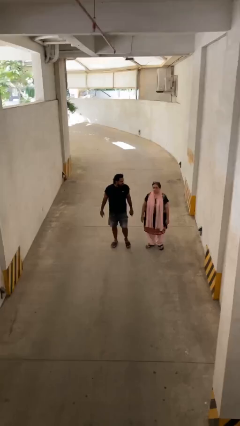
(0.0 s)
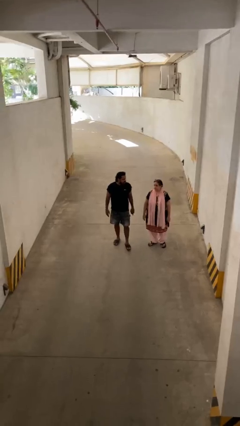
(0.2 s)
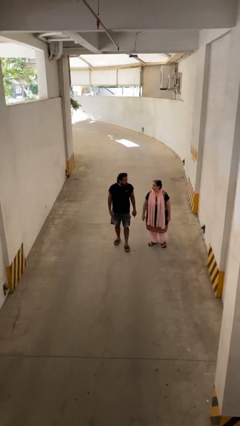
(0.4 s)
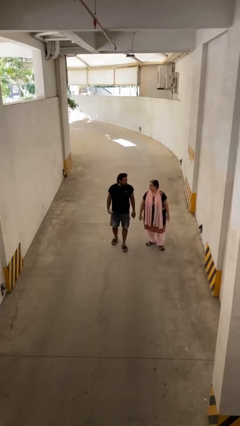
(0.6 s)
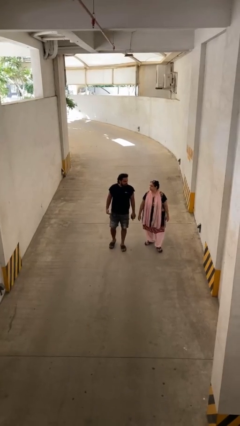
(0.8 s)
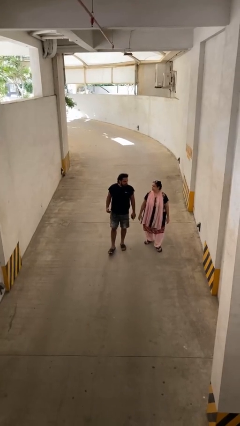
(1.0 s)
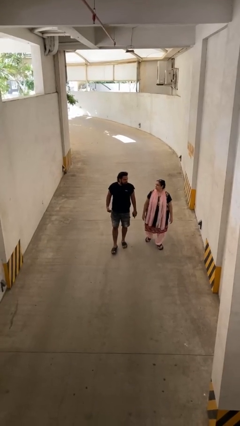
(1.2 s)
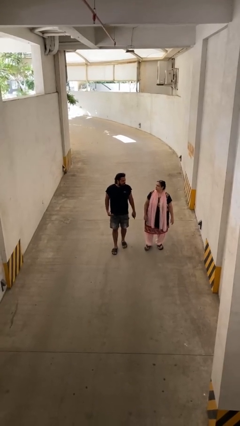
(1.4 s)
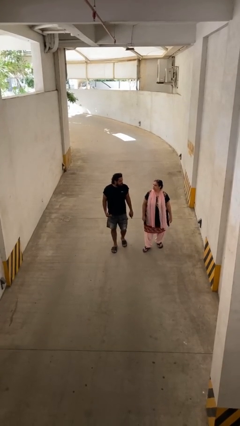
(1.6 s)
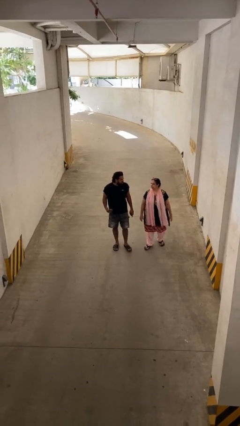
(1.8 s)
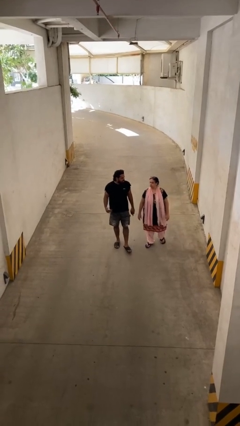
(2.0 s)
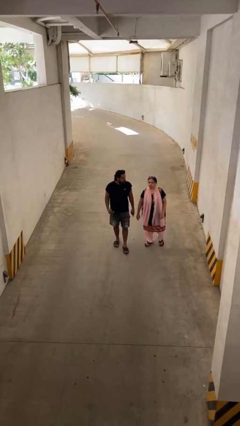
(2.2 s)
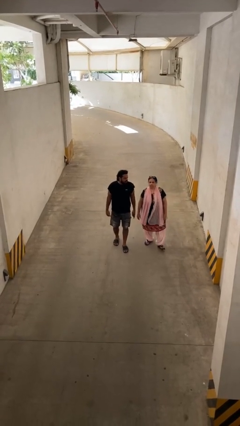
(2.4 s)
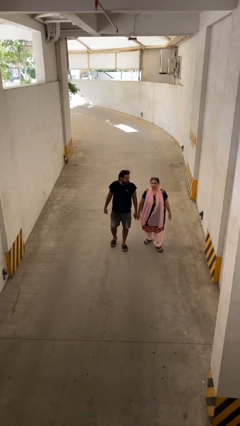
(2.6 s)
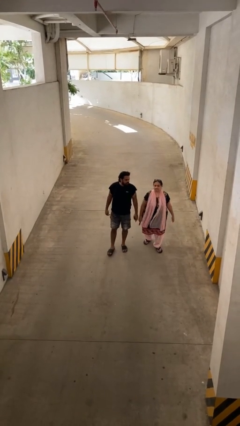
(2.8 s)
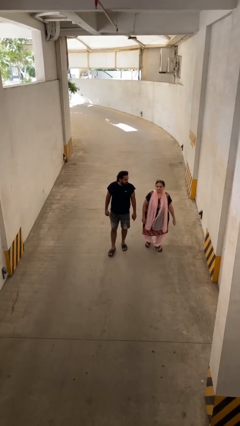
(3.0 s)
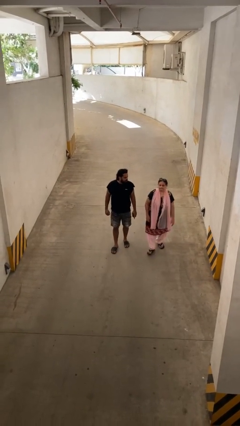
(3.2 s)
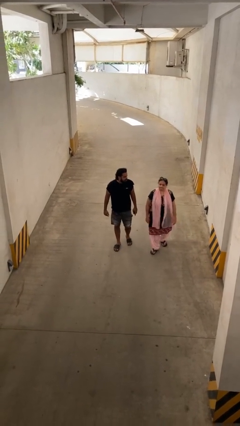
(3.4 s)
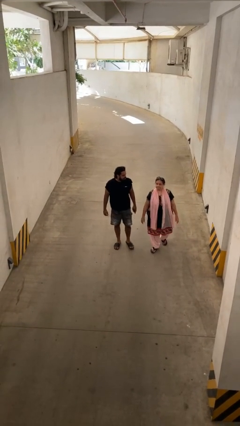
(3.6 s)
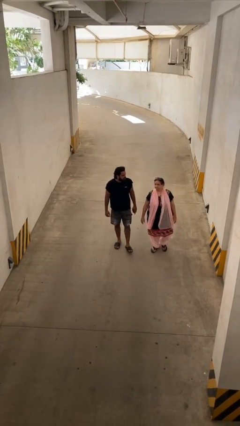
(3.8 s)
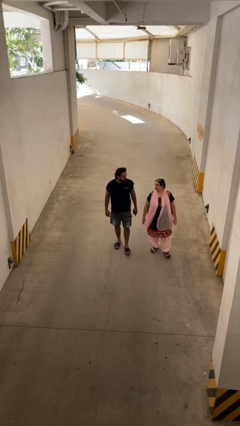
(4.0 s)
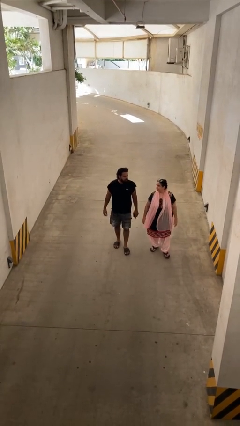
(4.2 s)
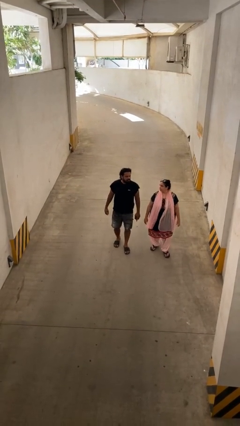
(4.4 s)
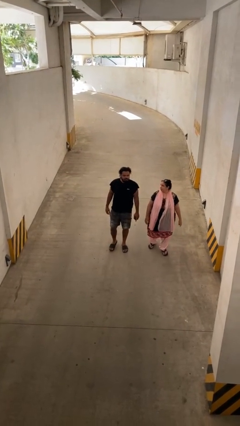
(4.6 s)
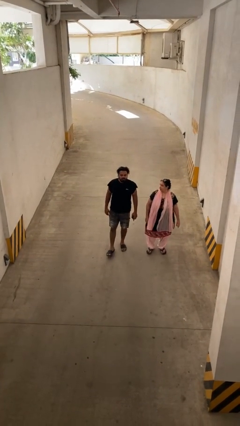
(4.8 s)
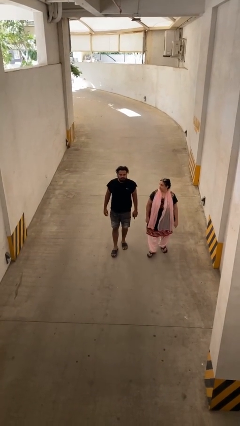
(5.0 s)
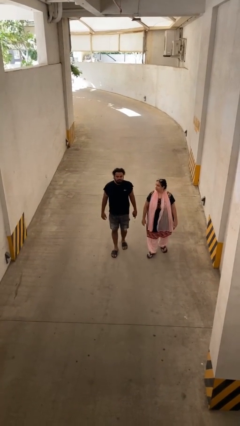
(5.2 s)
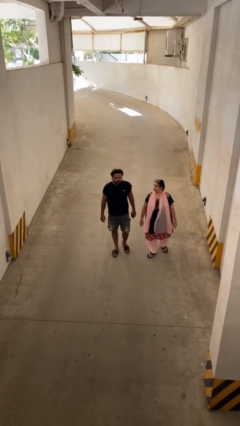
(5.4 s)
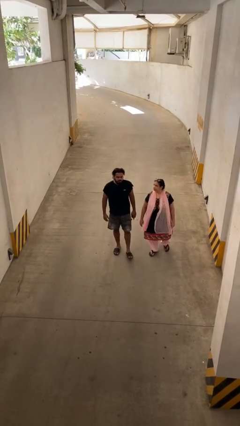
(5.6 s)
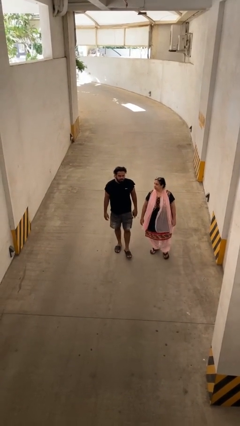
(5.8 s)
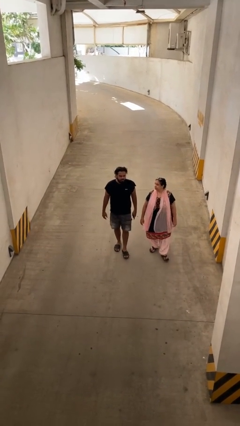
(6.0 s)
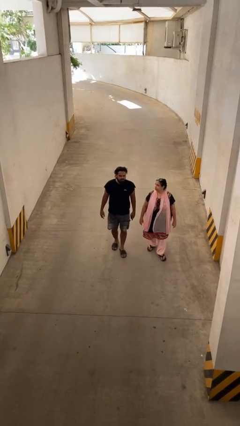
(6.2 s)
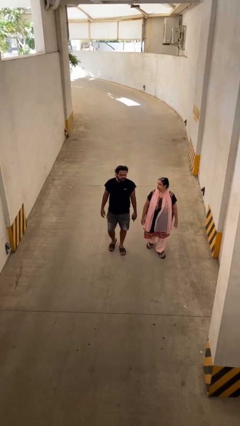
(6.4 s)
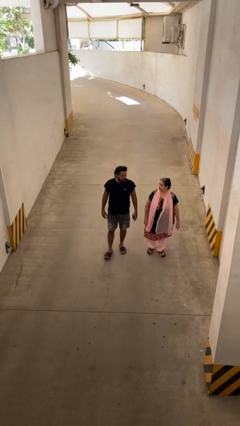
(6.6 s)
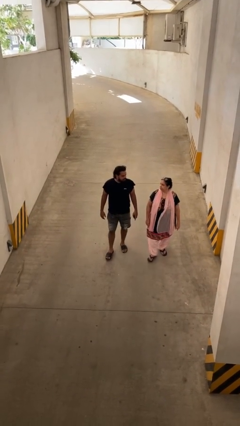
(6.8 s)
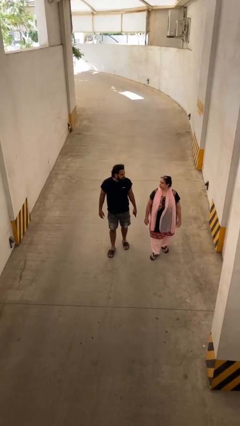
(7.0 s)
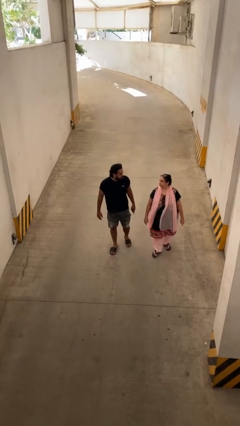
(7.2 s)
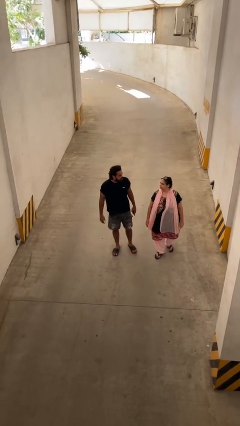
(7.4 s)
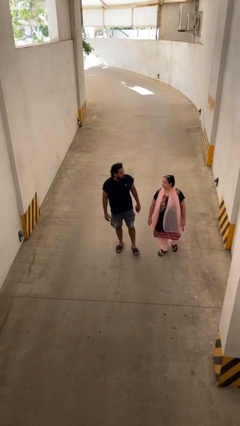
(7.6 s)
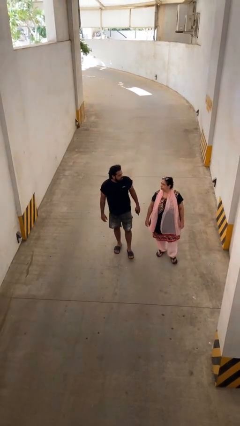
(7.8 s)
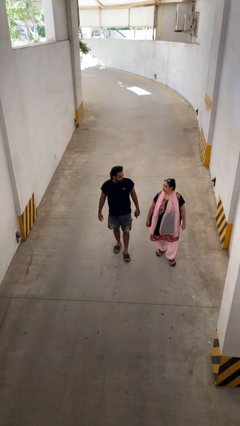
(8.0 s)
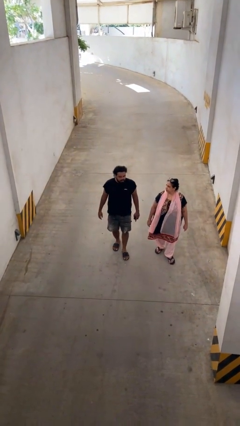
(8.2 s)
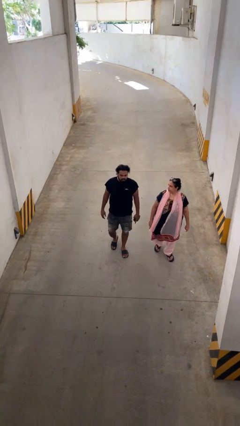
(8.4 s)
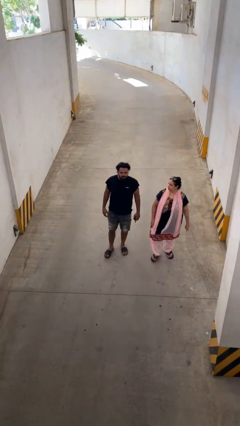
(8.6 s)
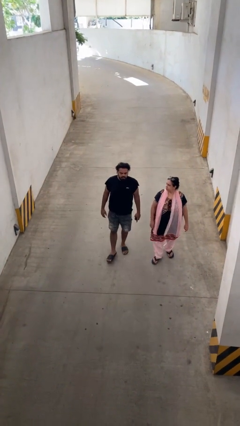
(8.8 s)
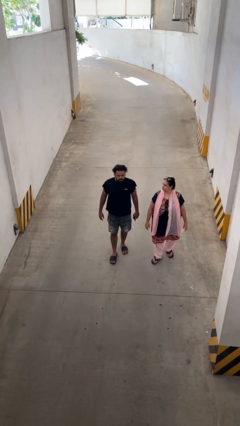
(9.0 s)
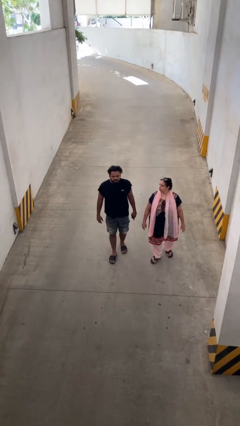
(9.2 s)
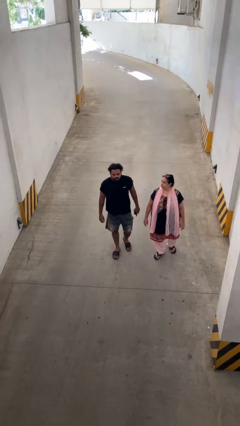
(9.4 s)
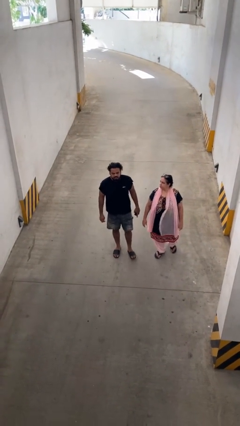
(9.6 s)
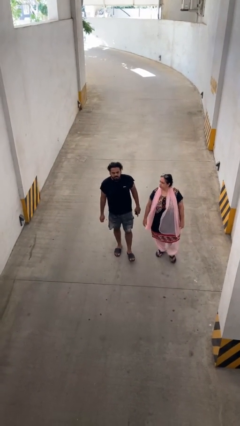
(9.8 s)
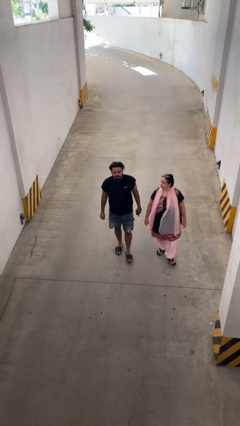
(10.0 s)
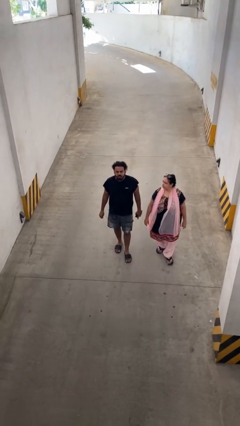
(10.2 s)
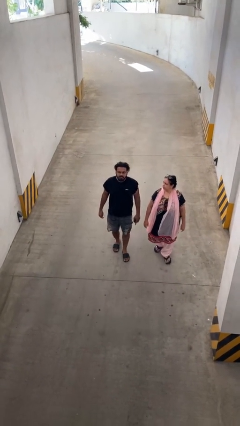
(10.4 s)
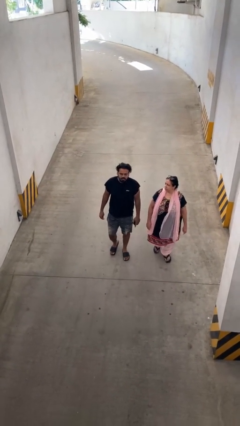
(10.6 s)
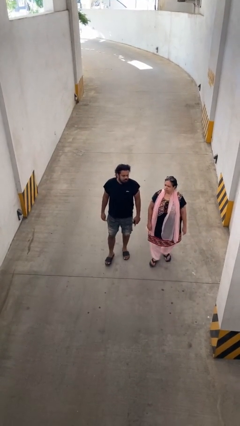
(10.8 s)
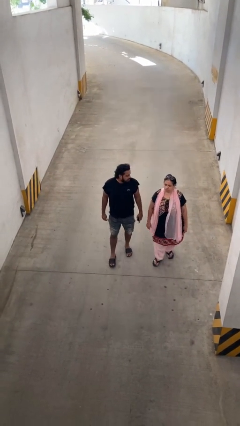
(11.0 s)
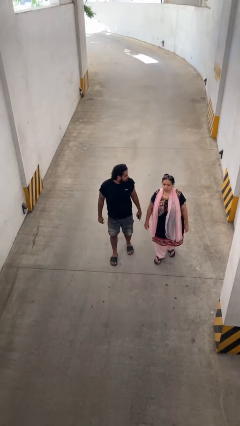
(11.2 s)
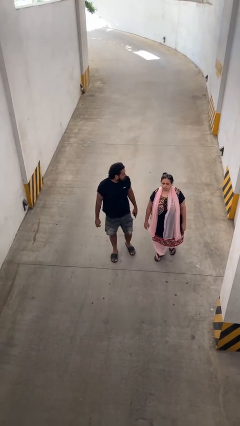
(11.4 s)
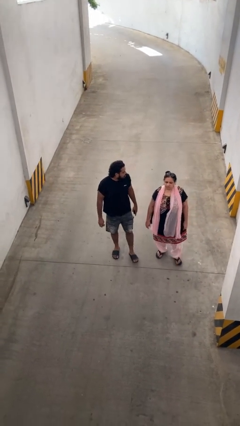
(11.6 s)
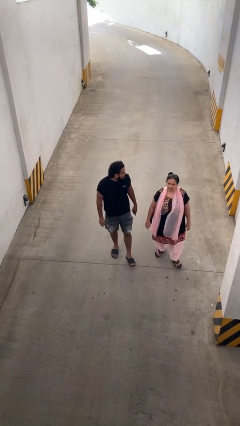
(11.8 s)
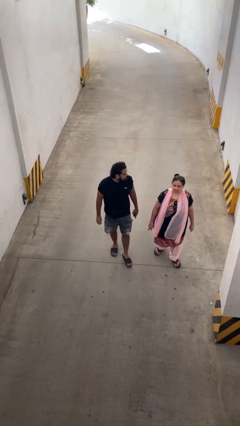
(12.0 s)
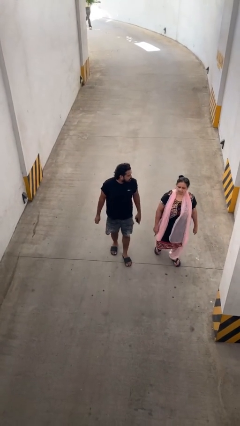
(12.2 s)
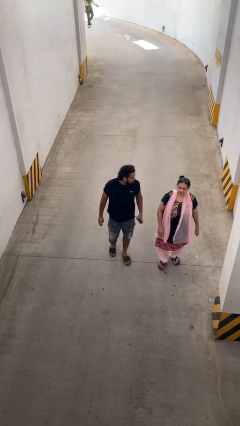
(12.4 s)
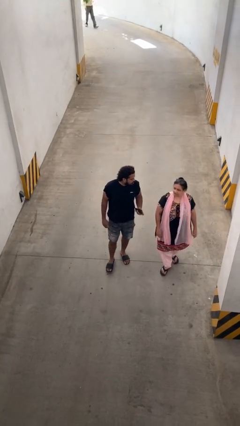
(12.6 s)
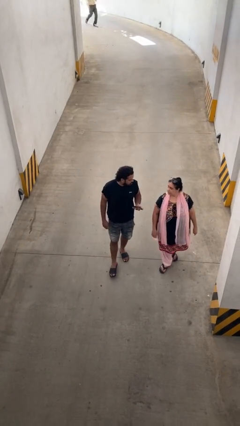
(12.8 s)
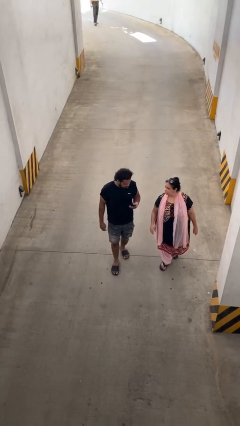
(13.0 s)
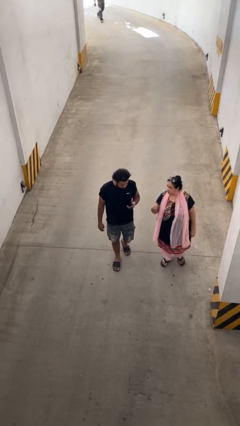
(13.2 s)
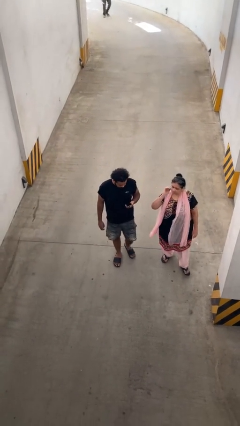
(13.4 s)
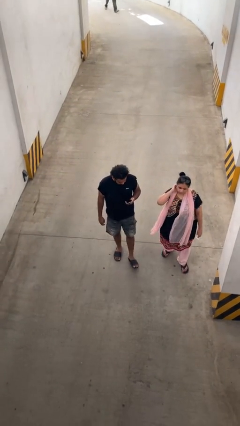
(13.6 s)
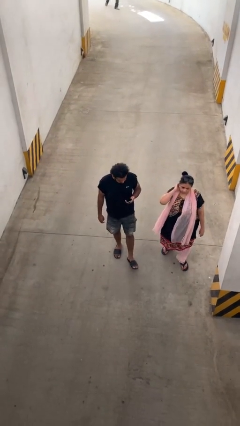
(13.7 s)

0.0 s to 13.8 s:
person talks to person

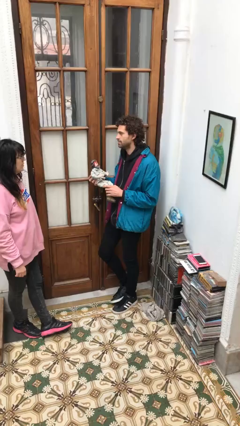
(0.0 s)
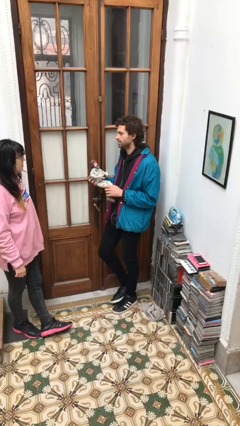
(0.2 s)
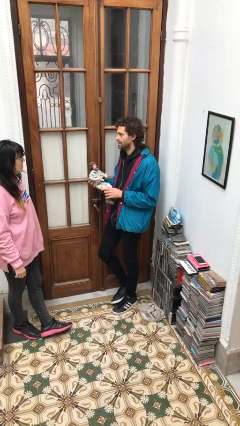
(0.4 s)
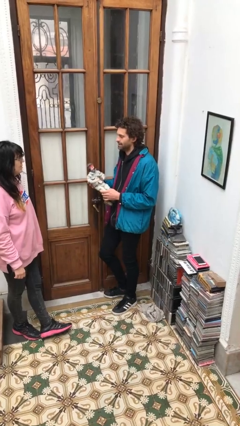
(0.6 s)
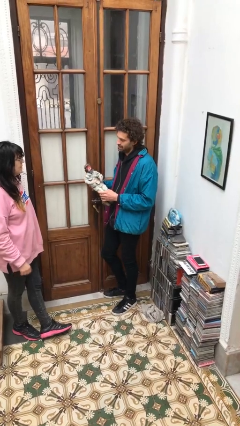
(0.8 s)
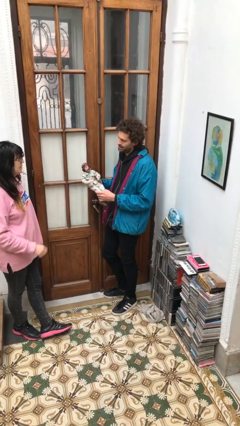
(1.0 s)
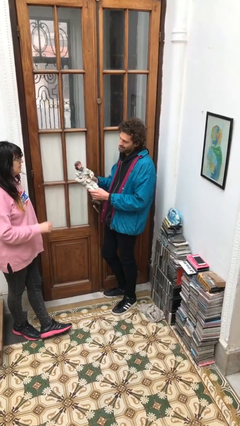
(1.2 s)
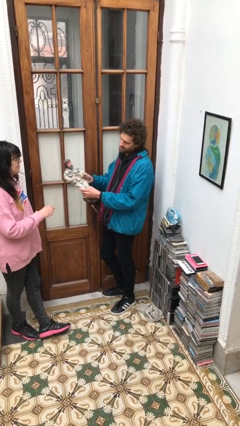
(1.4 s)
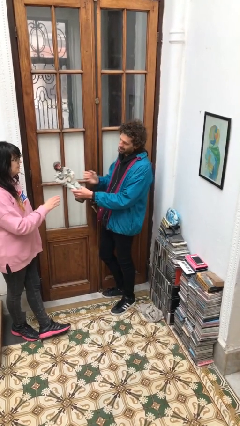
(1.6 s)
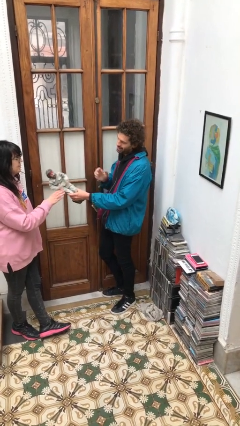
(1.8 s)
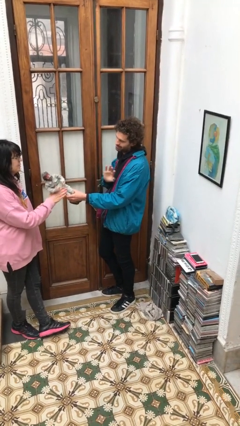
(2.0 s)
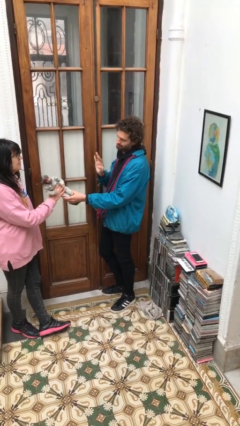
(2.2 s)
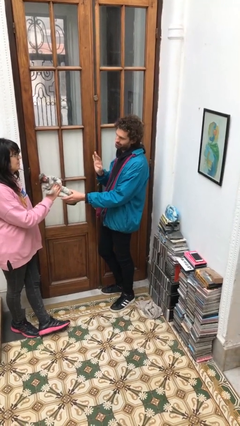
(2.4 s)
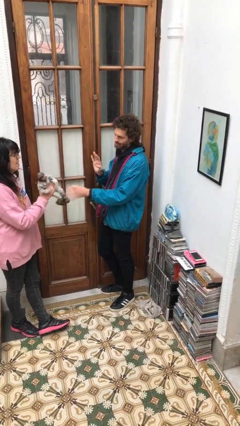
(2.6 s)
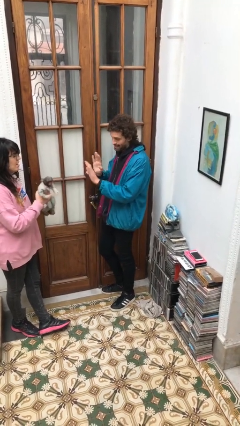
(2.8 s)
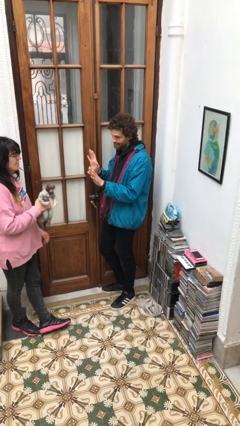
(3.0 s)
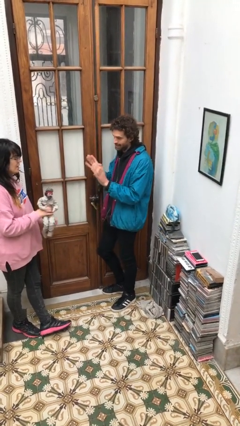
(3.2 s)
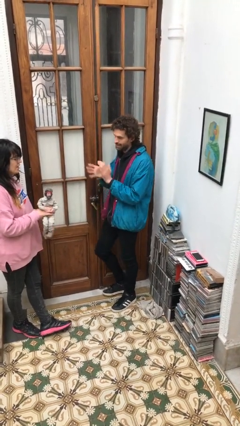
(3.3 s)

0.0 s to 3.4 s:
person transfers object to person

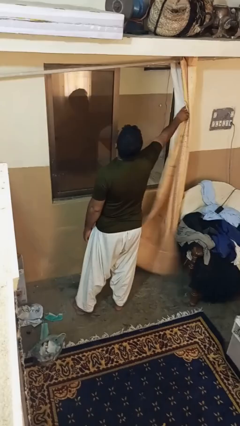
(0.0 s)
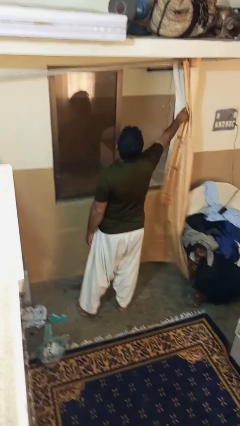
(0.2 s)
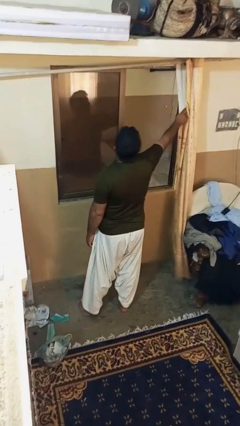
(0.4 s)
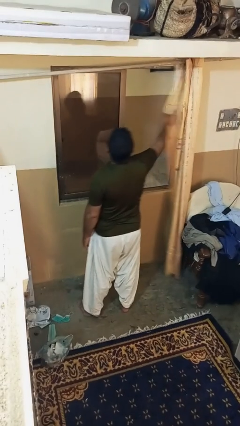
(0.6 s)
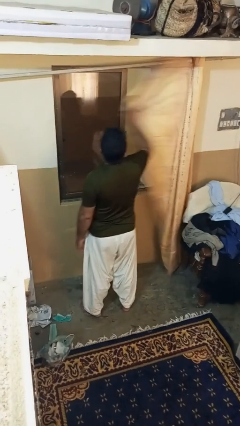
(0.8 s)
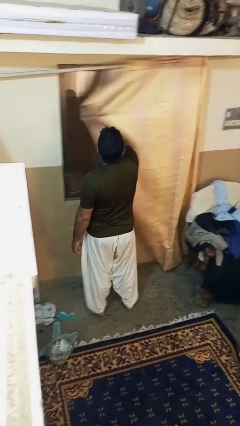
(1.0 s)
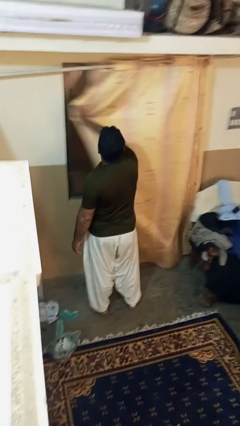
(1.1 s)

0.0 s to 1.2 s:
person closes curtains
